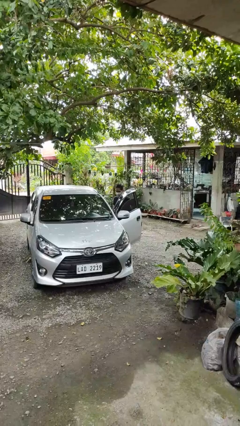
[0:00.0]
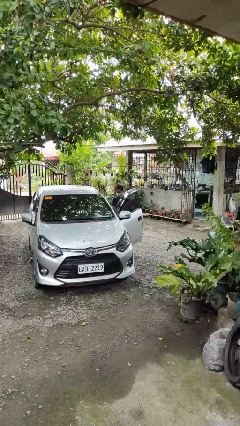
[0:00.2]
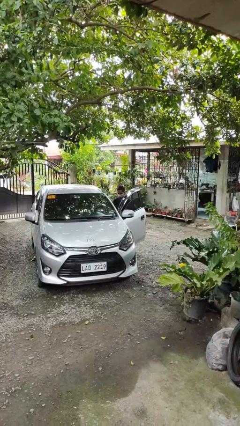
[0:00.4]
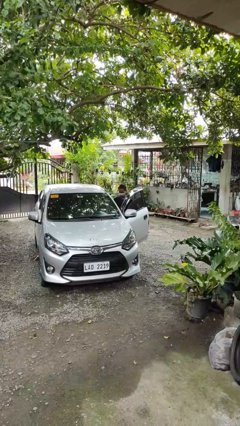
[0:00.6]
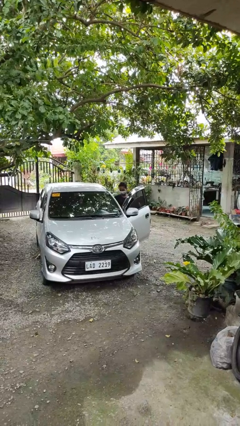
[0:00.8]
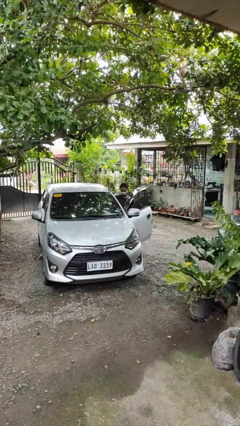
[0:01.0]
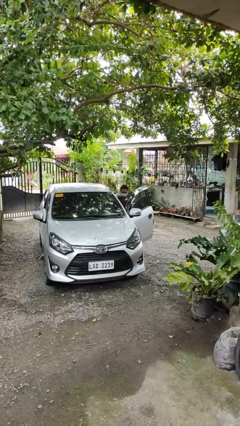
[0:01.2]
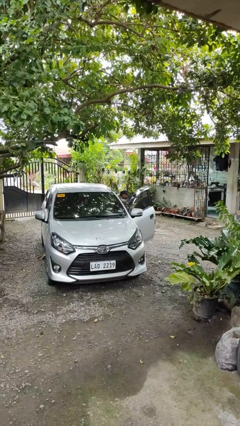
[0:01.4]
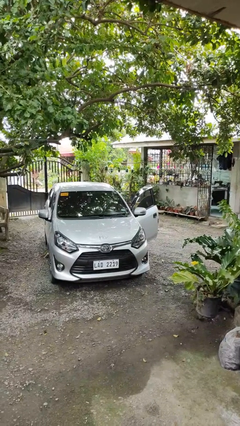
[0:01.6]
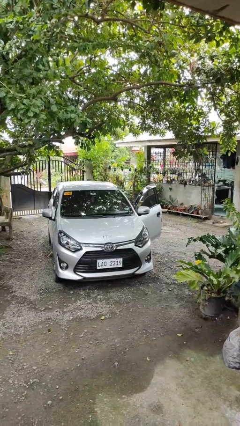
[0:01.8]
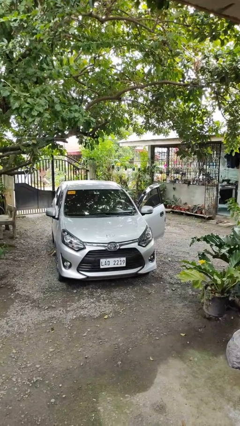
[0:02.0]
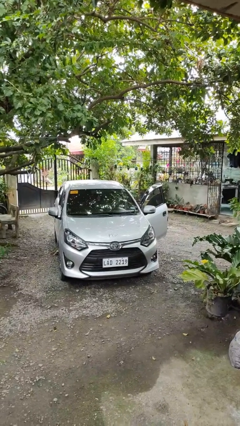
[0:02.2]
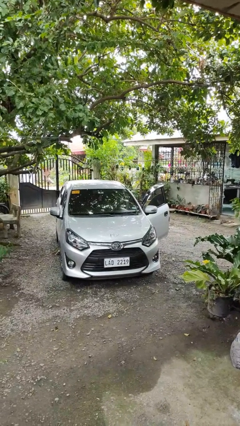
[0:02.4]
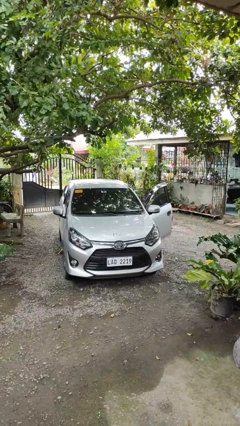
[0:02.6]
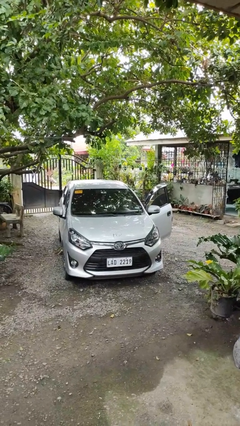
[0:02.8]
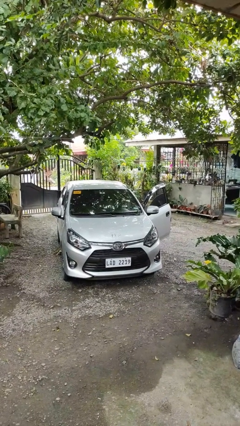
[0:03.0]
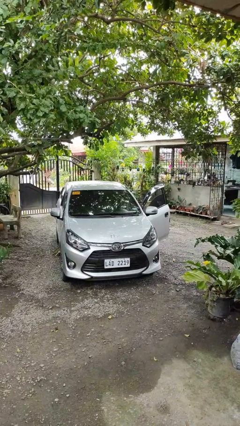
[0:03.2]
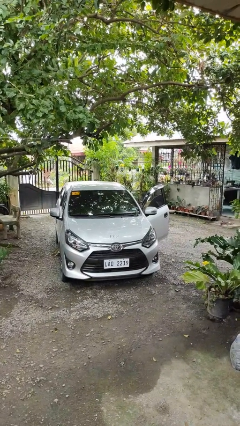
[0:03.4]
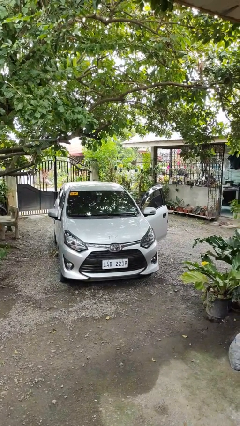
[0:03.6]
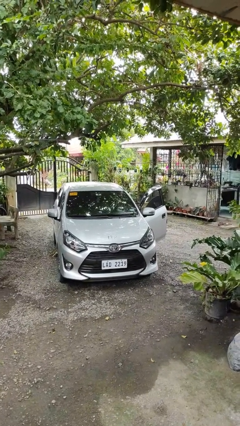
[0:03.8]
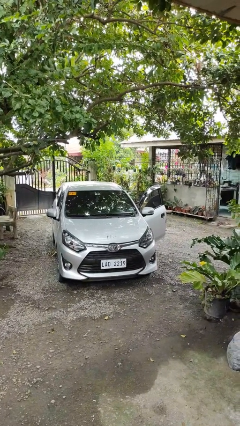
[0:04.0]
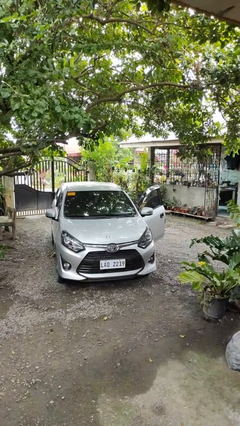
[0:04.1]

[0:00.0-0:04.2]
person enters car

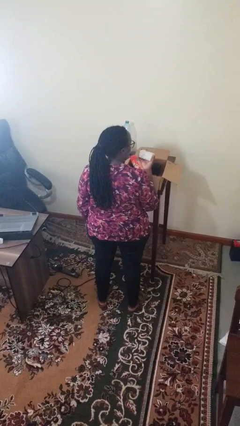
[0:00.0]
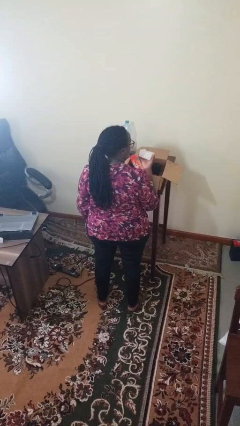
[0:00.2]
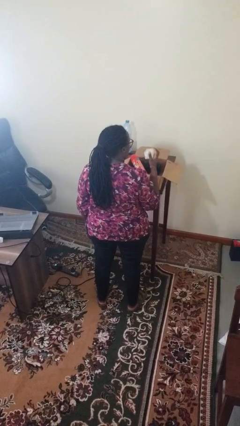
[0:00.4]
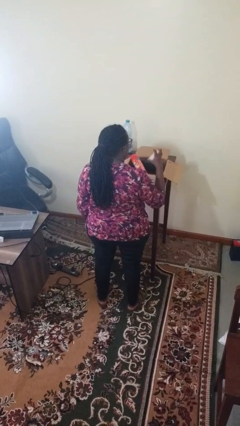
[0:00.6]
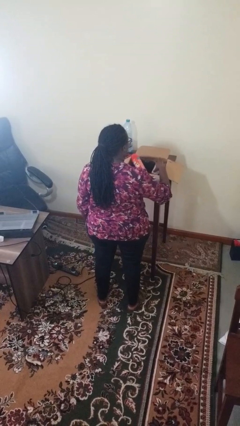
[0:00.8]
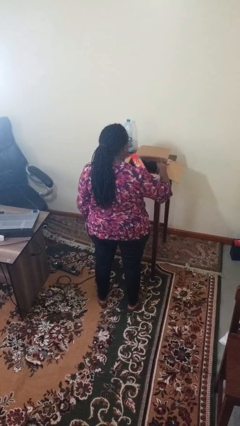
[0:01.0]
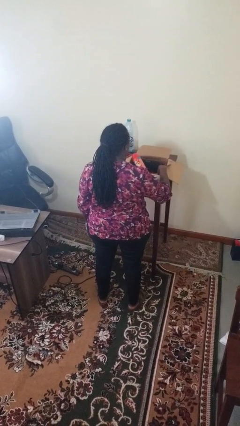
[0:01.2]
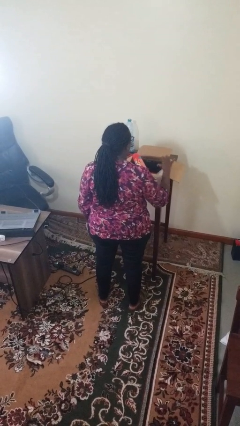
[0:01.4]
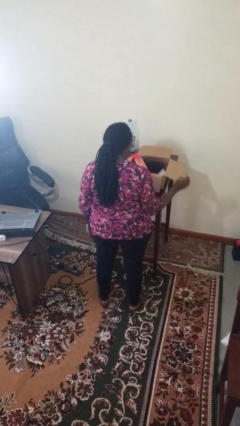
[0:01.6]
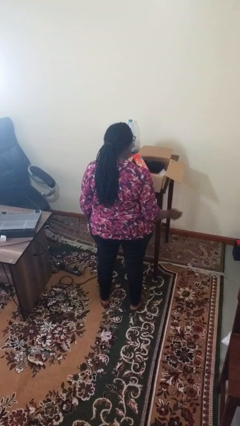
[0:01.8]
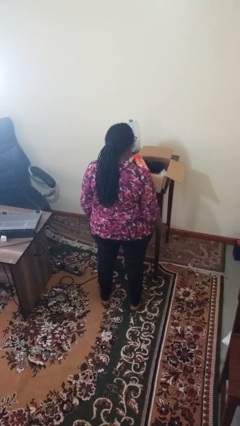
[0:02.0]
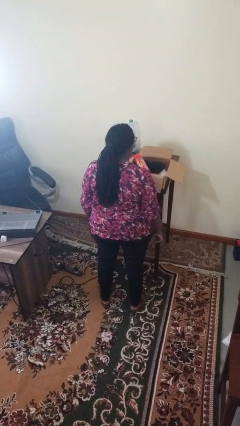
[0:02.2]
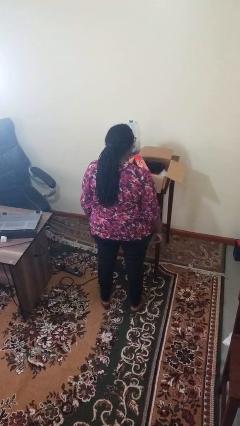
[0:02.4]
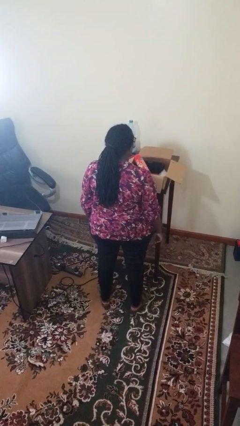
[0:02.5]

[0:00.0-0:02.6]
person puts object into box

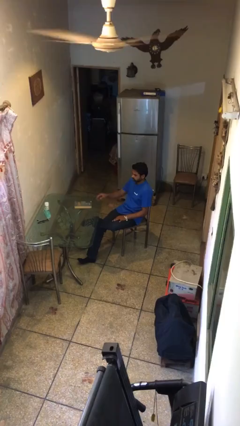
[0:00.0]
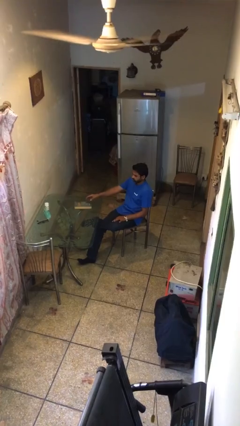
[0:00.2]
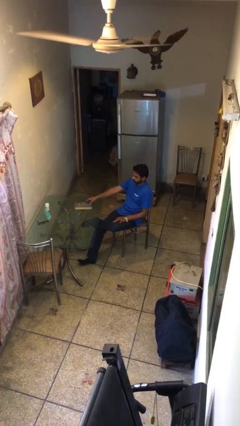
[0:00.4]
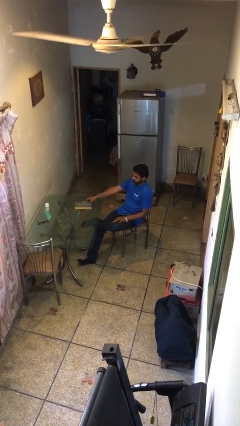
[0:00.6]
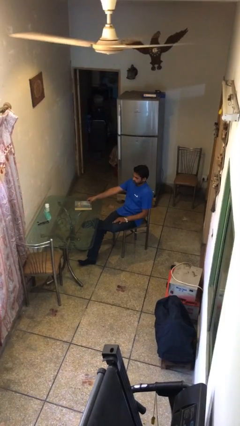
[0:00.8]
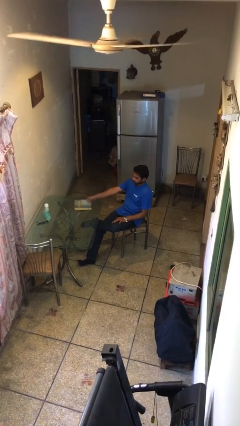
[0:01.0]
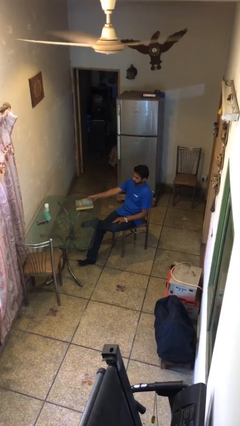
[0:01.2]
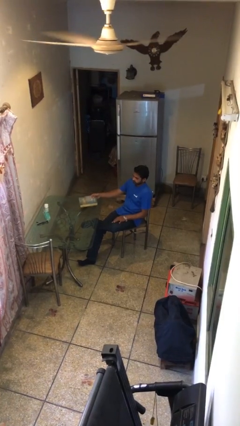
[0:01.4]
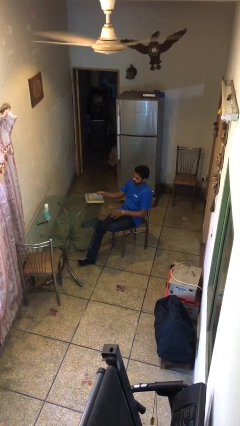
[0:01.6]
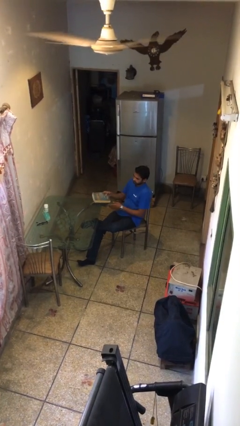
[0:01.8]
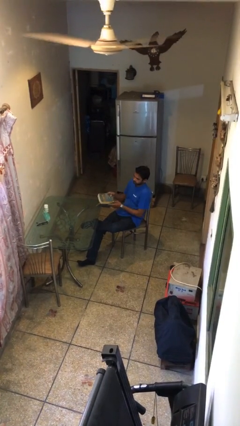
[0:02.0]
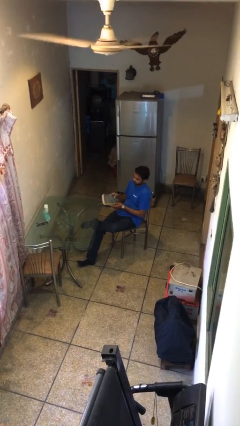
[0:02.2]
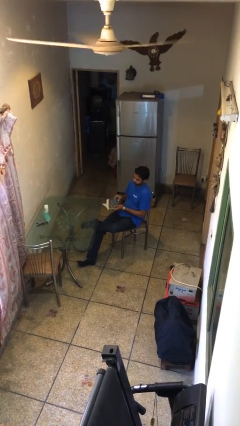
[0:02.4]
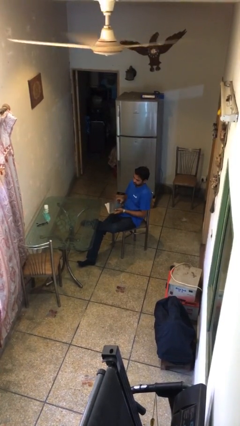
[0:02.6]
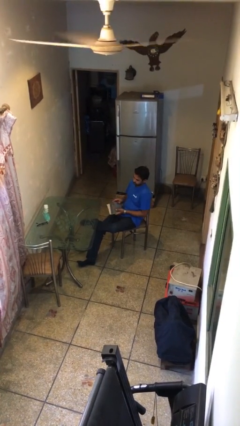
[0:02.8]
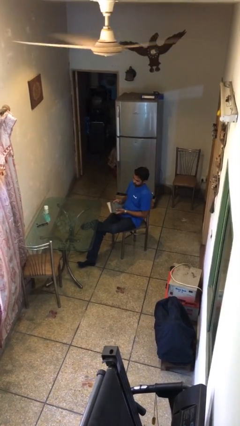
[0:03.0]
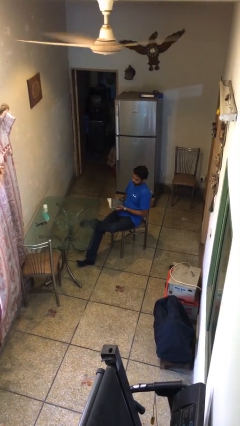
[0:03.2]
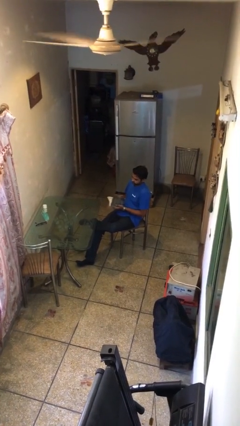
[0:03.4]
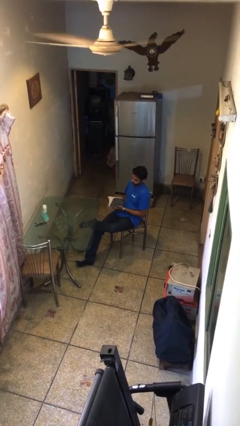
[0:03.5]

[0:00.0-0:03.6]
person picks up object from table

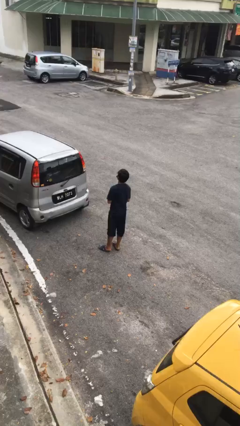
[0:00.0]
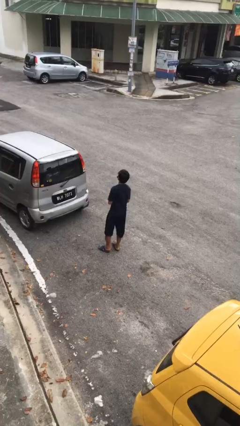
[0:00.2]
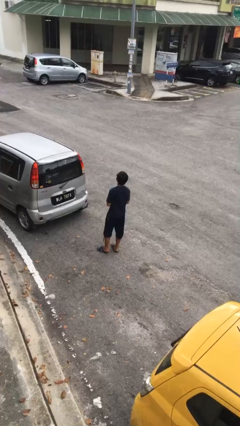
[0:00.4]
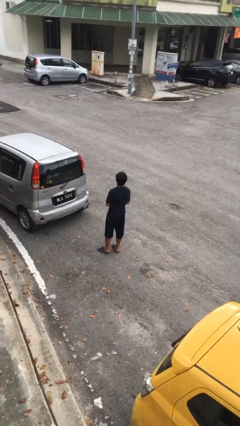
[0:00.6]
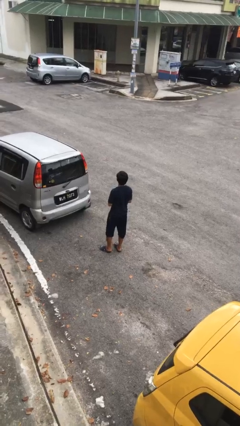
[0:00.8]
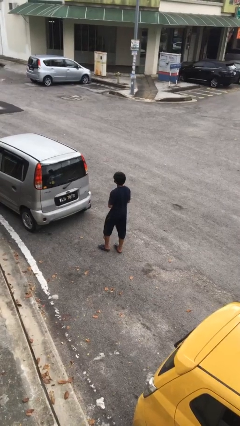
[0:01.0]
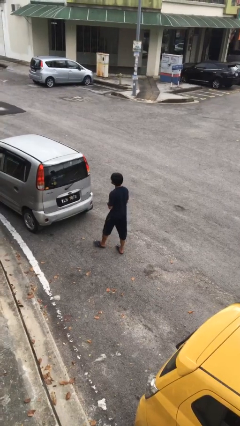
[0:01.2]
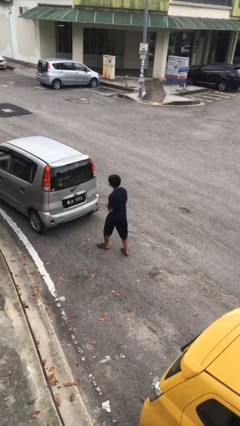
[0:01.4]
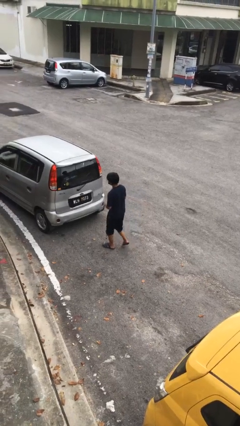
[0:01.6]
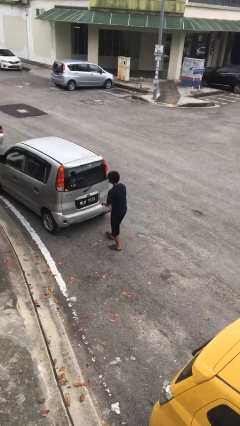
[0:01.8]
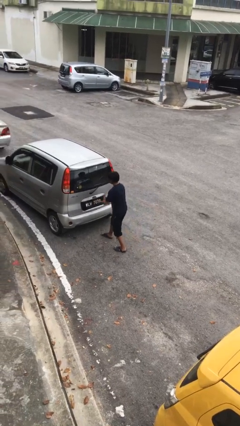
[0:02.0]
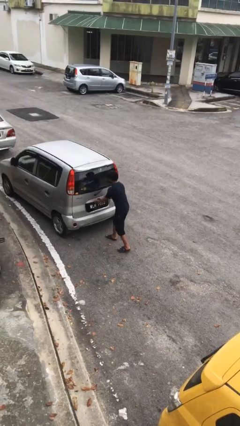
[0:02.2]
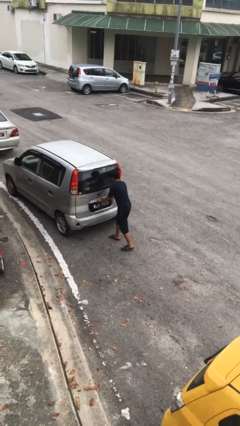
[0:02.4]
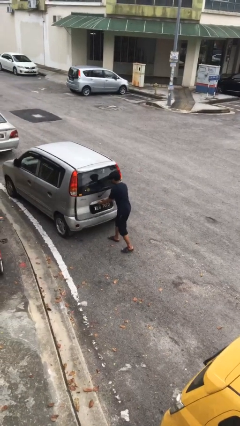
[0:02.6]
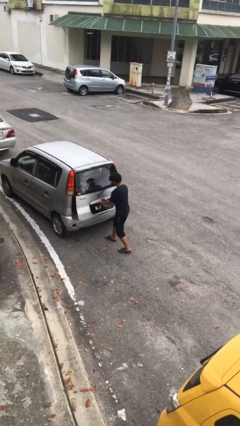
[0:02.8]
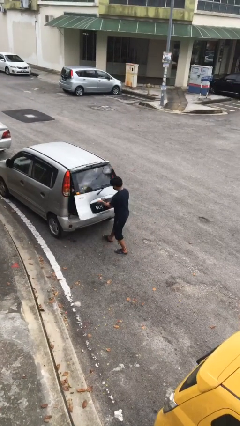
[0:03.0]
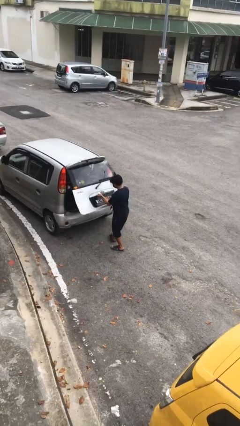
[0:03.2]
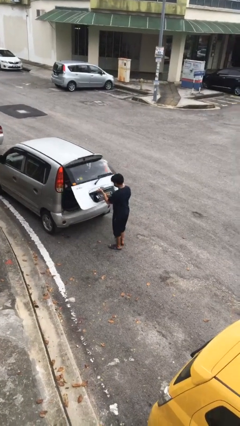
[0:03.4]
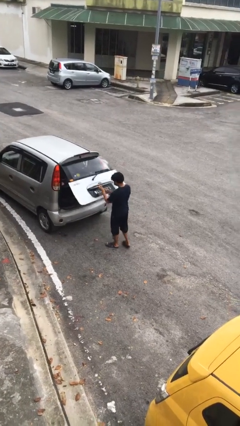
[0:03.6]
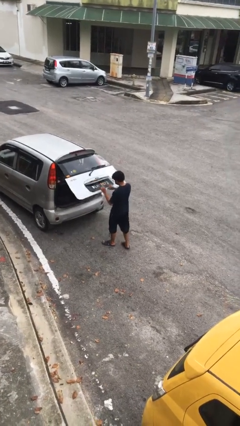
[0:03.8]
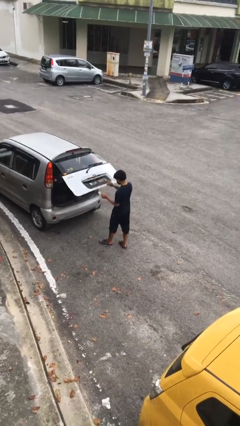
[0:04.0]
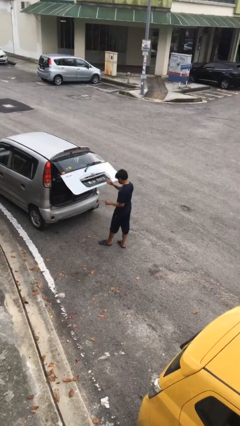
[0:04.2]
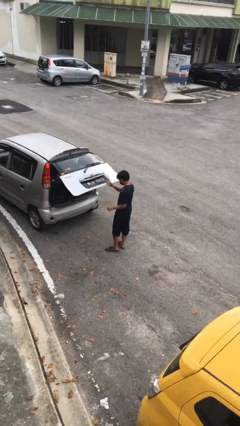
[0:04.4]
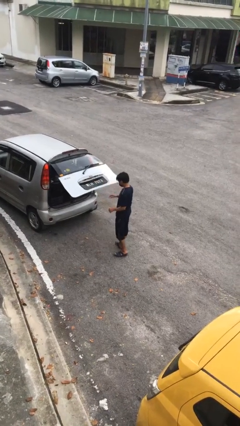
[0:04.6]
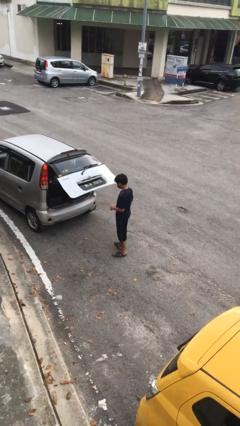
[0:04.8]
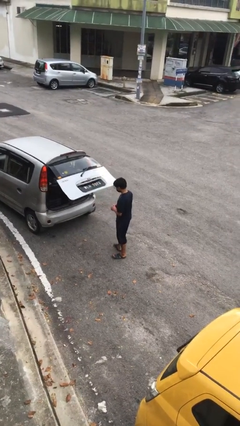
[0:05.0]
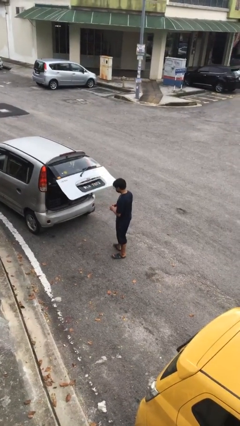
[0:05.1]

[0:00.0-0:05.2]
person opens car trunk

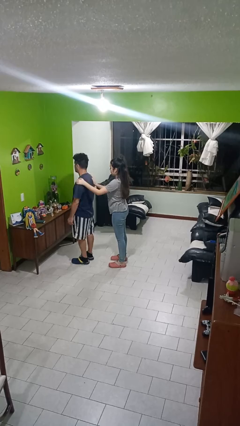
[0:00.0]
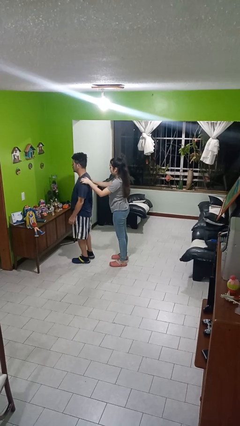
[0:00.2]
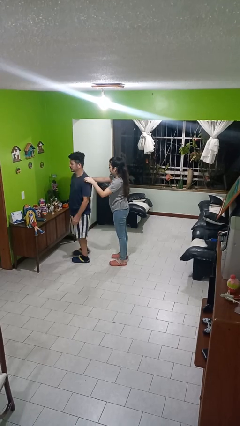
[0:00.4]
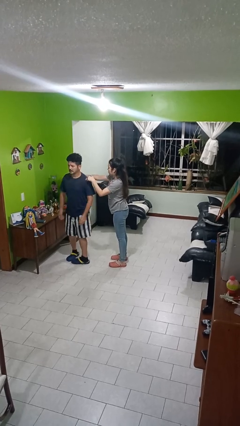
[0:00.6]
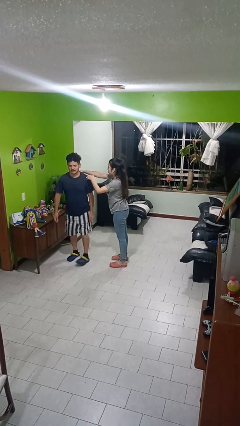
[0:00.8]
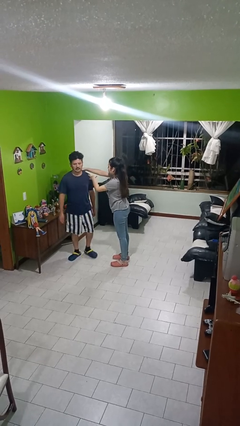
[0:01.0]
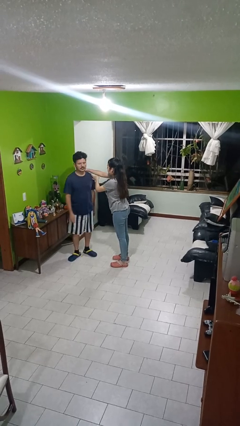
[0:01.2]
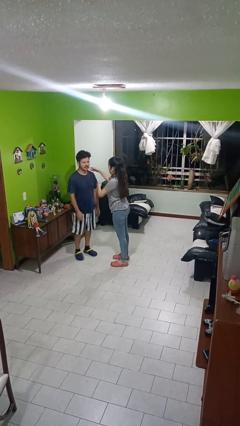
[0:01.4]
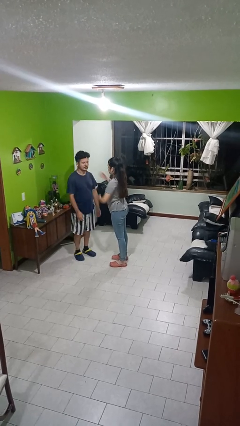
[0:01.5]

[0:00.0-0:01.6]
person spins person around

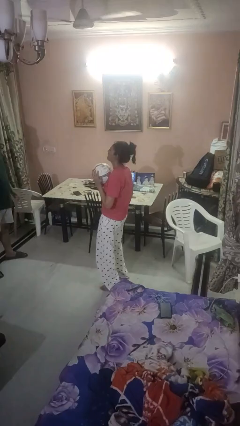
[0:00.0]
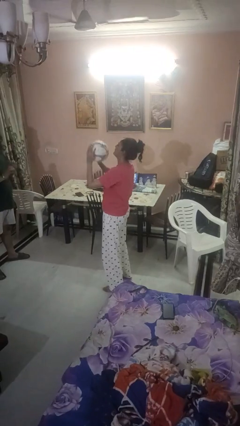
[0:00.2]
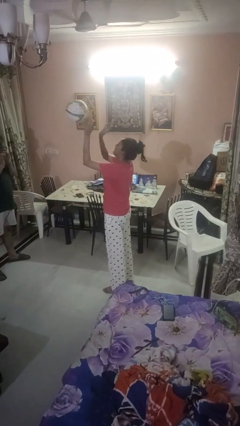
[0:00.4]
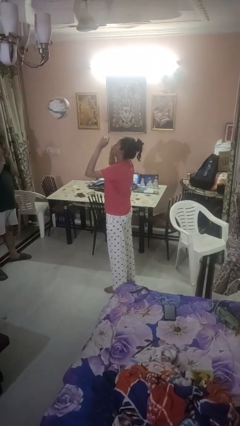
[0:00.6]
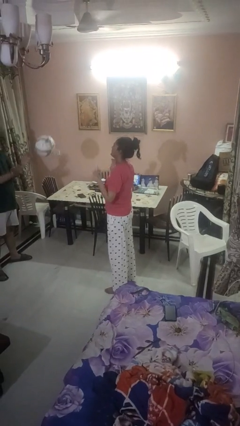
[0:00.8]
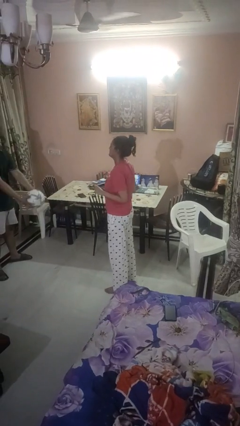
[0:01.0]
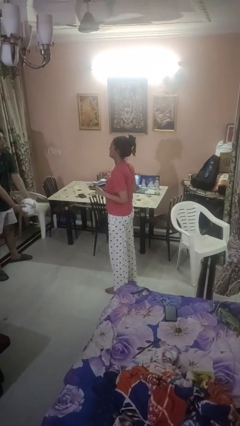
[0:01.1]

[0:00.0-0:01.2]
person throws object to person
